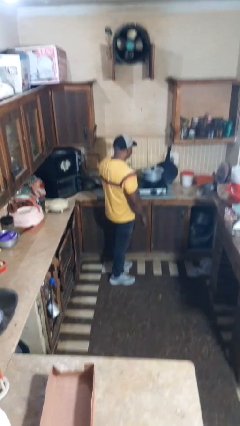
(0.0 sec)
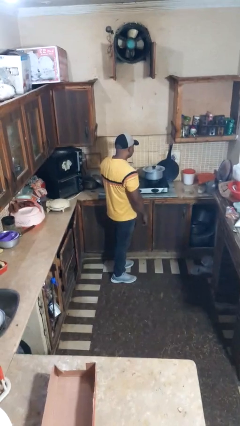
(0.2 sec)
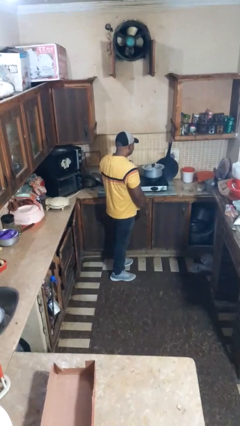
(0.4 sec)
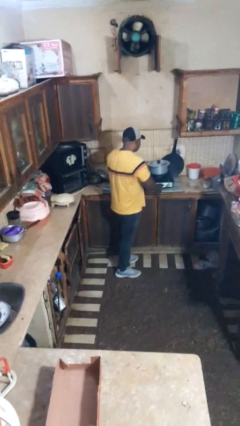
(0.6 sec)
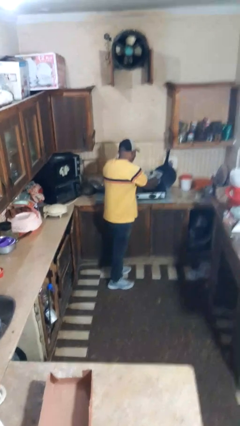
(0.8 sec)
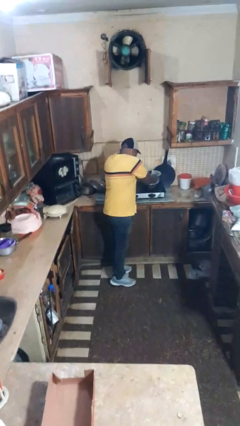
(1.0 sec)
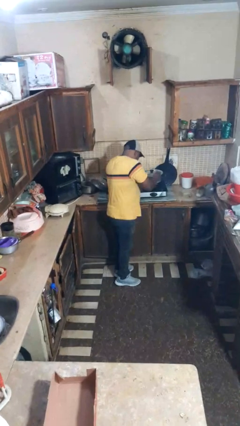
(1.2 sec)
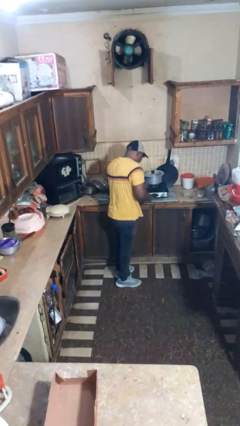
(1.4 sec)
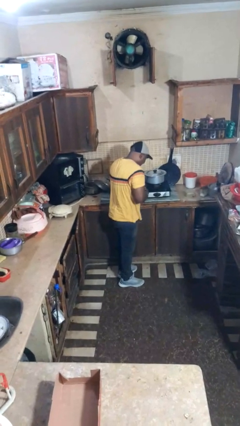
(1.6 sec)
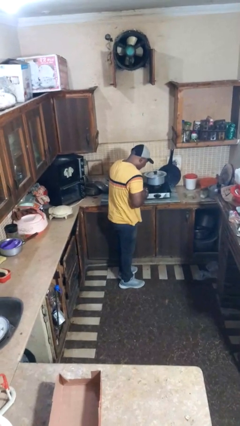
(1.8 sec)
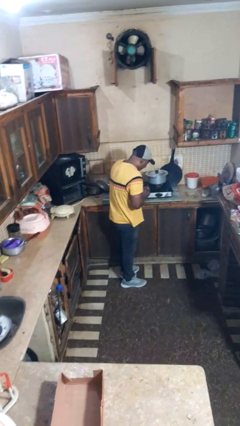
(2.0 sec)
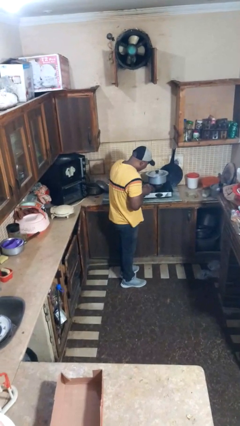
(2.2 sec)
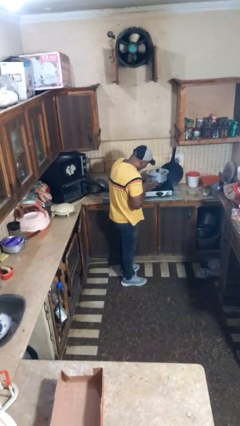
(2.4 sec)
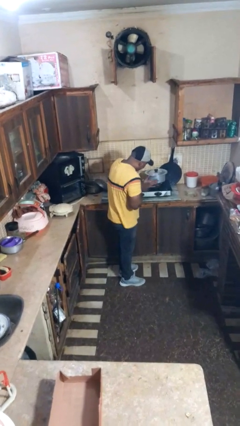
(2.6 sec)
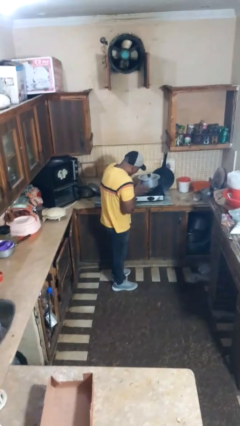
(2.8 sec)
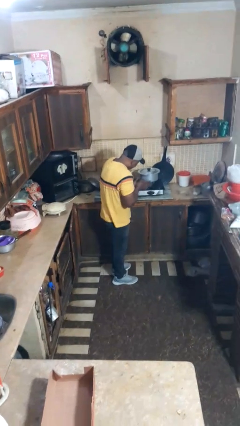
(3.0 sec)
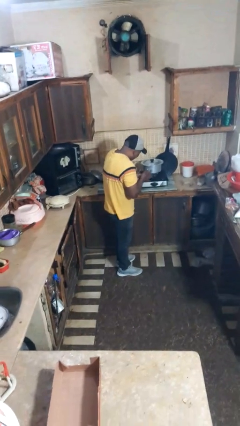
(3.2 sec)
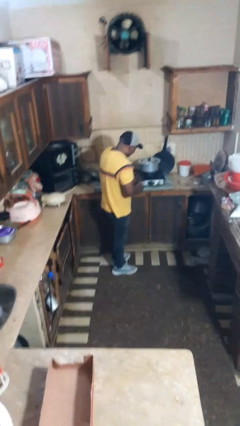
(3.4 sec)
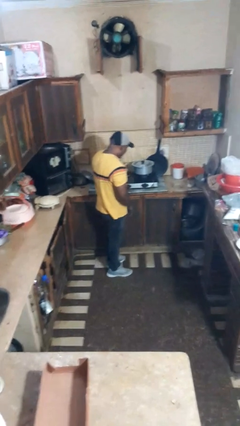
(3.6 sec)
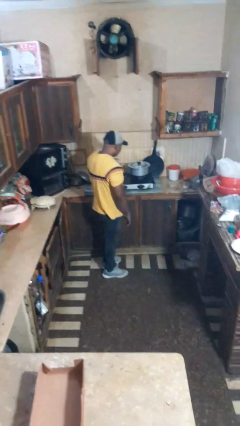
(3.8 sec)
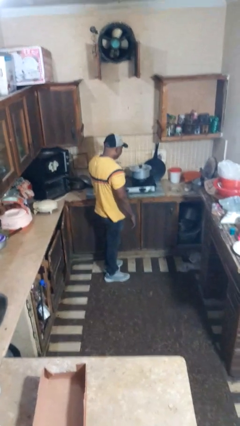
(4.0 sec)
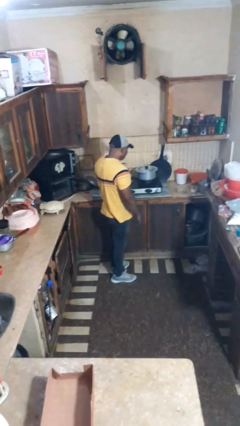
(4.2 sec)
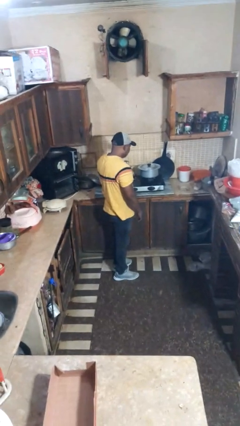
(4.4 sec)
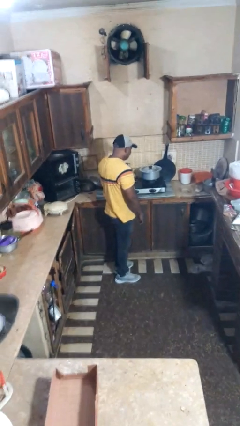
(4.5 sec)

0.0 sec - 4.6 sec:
person burns hand

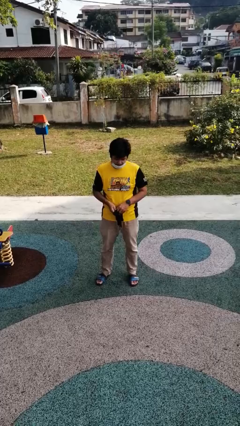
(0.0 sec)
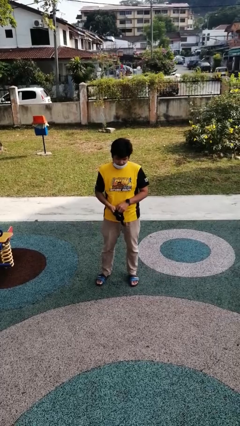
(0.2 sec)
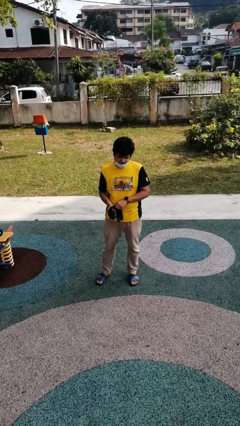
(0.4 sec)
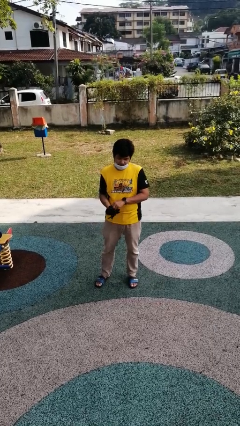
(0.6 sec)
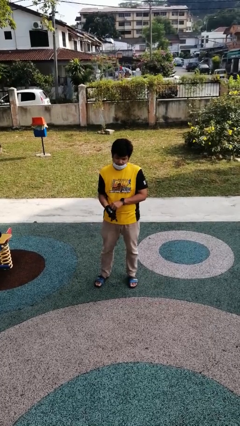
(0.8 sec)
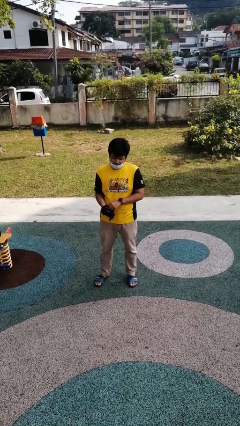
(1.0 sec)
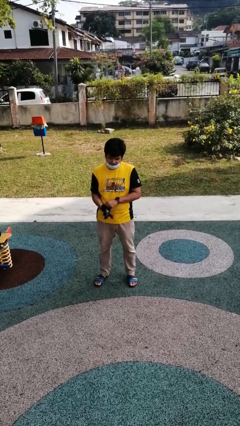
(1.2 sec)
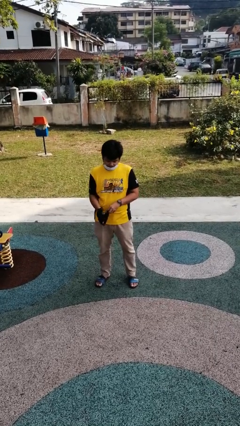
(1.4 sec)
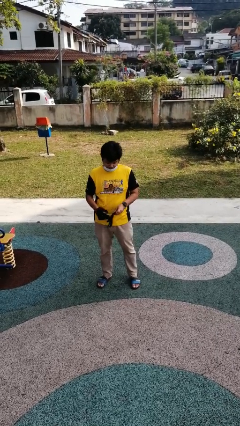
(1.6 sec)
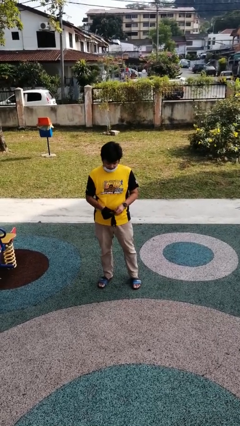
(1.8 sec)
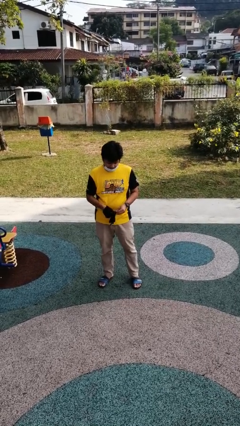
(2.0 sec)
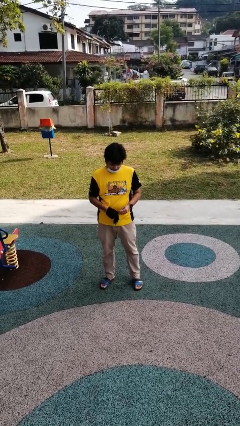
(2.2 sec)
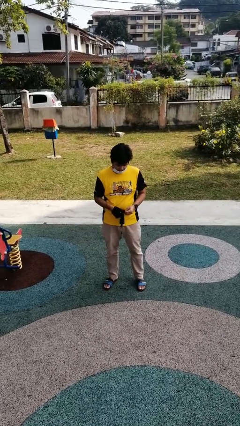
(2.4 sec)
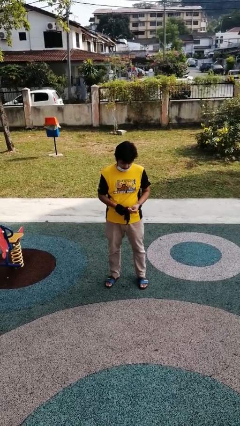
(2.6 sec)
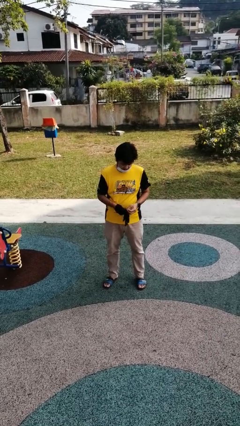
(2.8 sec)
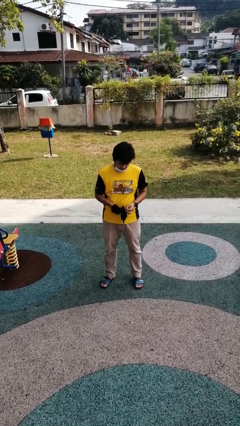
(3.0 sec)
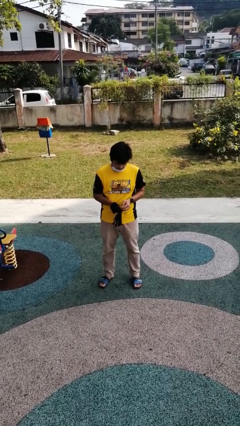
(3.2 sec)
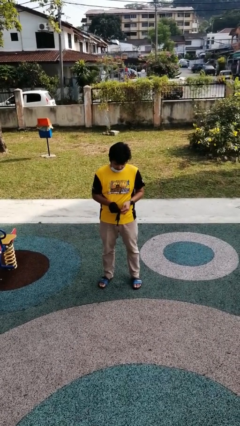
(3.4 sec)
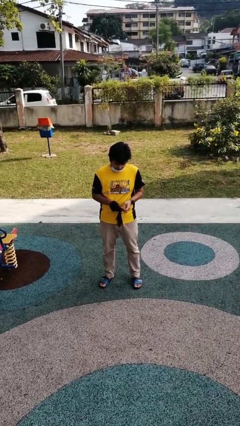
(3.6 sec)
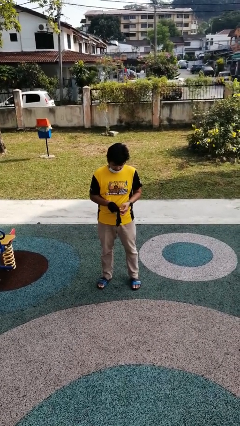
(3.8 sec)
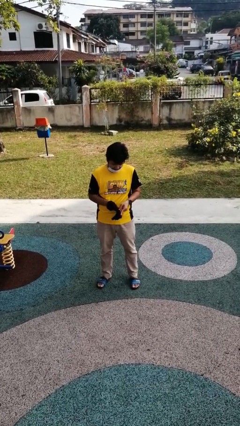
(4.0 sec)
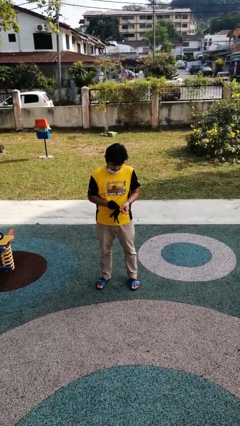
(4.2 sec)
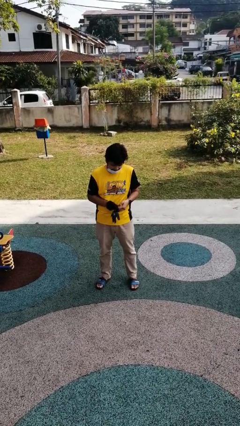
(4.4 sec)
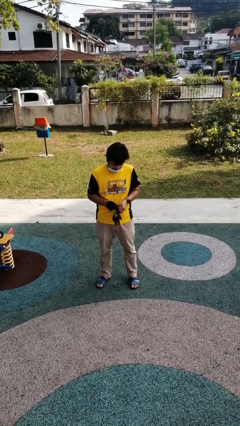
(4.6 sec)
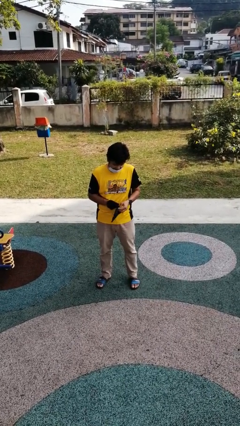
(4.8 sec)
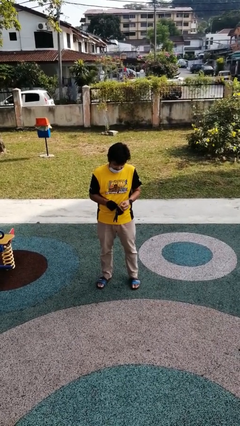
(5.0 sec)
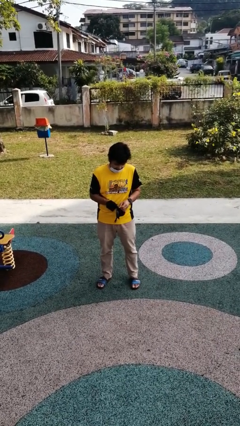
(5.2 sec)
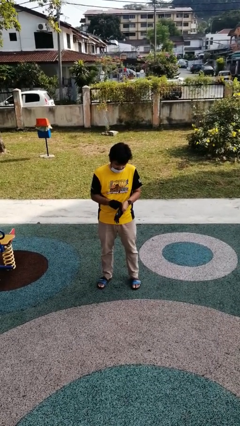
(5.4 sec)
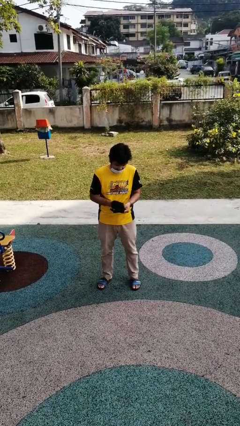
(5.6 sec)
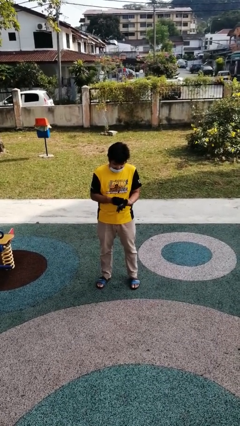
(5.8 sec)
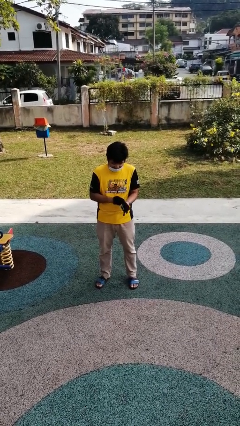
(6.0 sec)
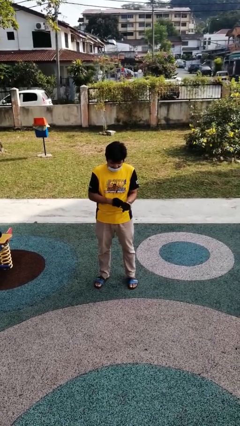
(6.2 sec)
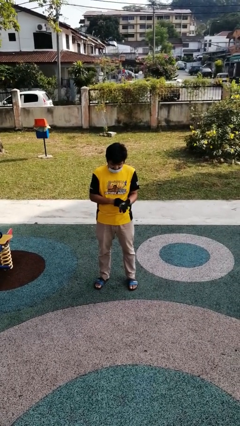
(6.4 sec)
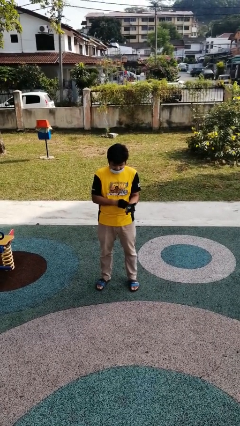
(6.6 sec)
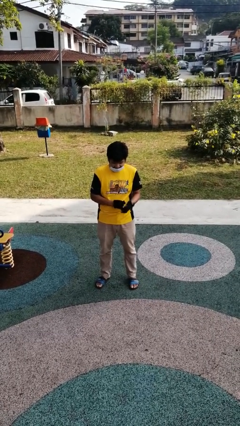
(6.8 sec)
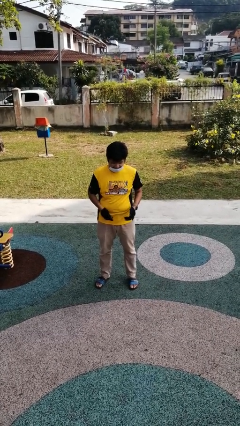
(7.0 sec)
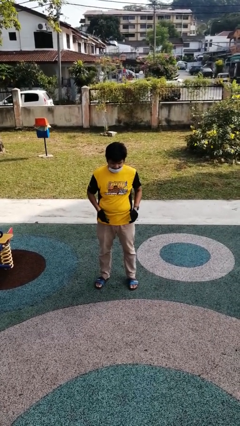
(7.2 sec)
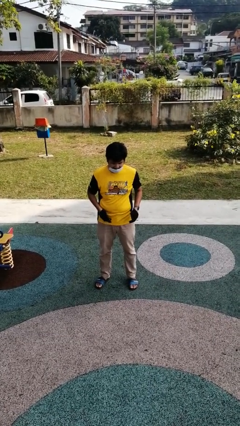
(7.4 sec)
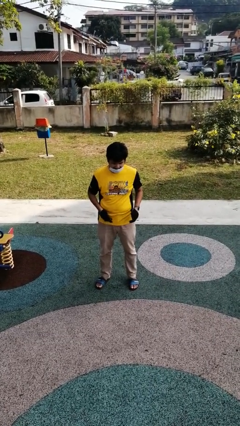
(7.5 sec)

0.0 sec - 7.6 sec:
person puts on gloves

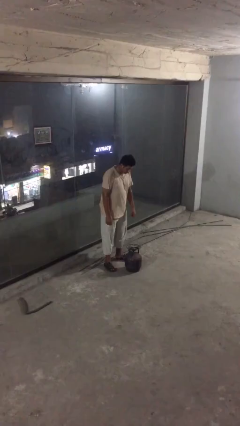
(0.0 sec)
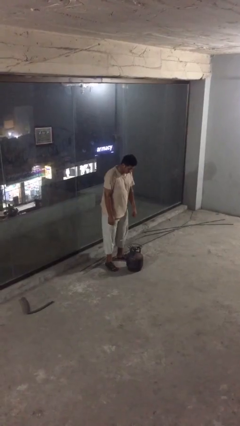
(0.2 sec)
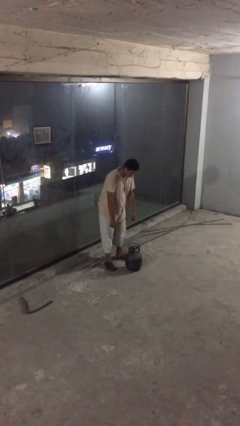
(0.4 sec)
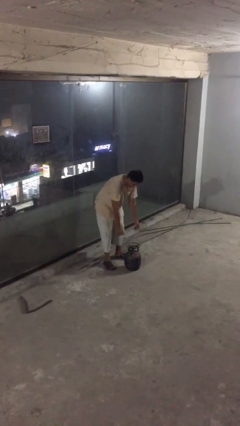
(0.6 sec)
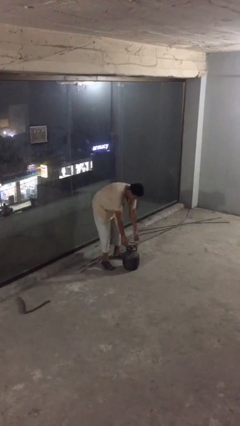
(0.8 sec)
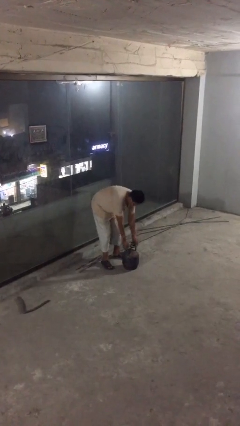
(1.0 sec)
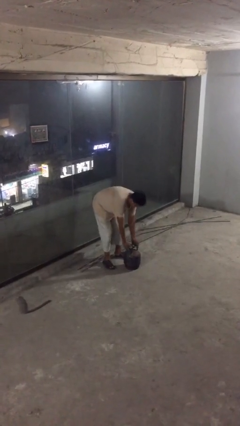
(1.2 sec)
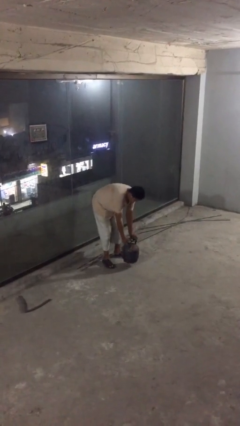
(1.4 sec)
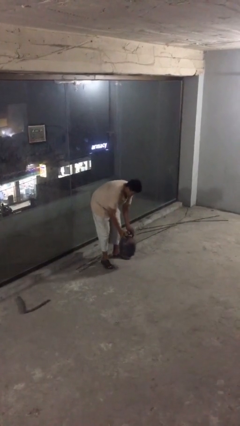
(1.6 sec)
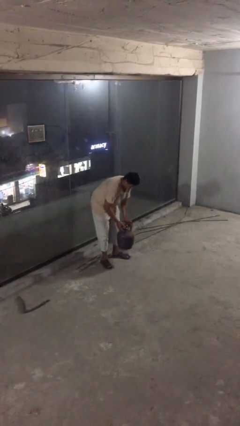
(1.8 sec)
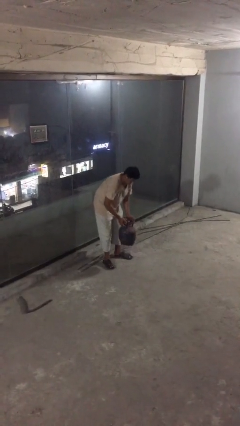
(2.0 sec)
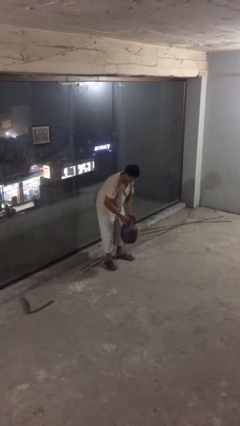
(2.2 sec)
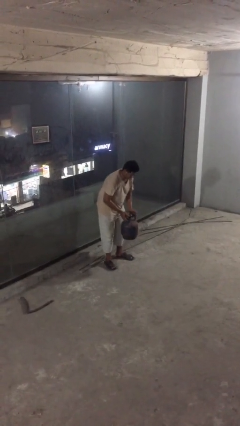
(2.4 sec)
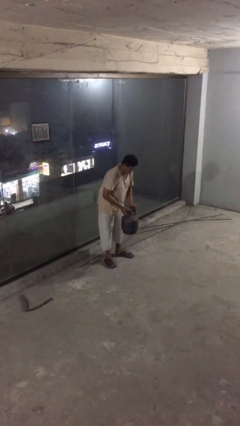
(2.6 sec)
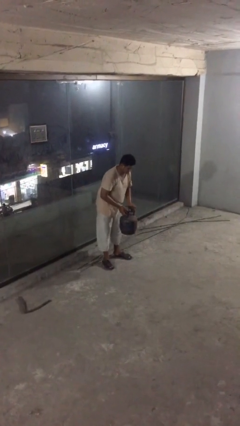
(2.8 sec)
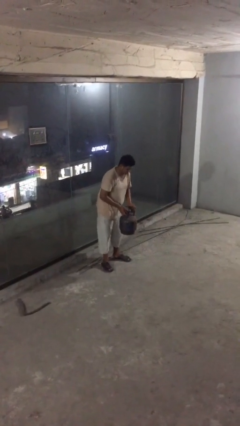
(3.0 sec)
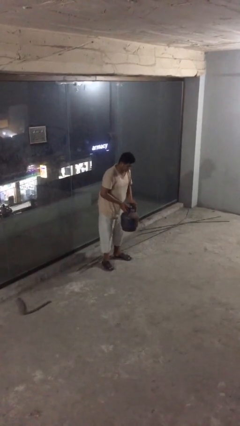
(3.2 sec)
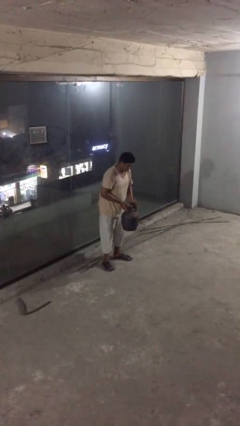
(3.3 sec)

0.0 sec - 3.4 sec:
person picks up object from floor

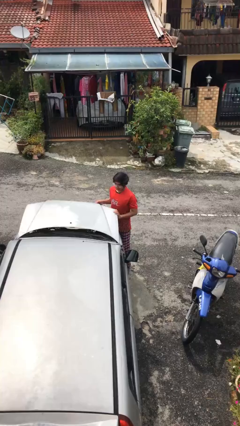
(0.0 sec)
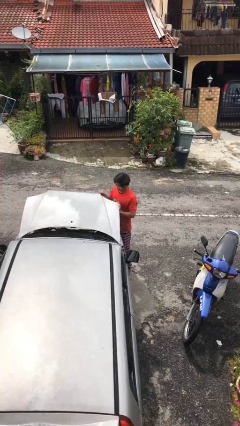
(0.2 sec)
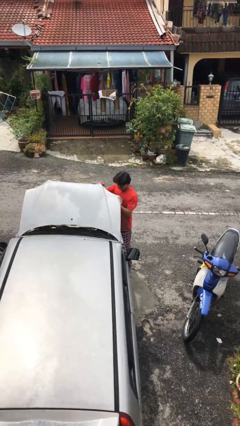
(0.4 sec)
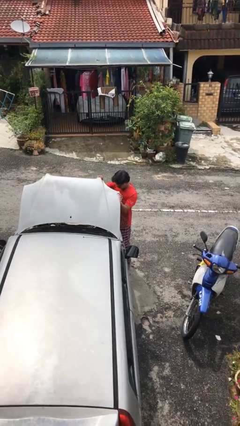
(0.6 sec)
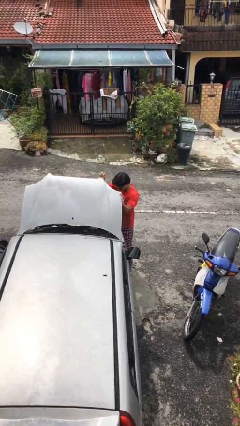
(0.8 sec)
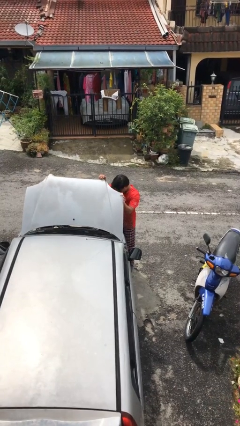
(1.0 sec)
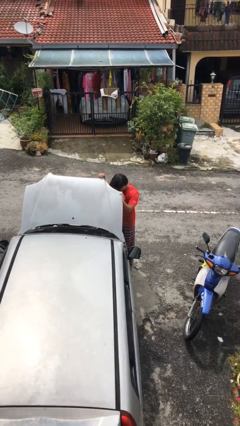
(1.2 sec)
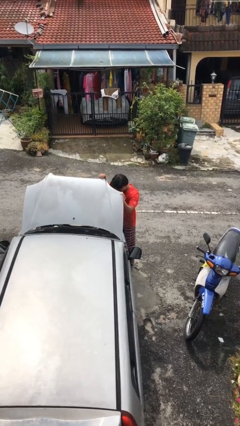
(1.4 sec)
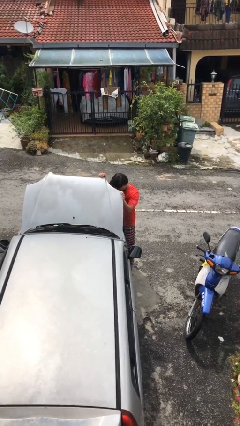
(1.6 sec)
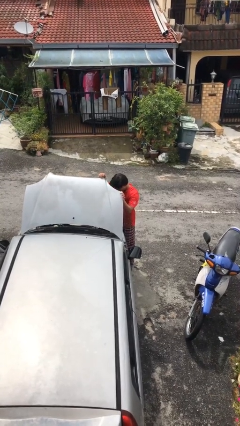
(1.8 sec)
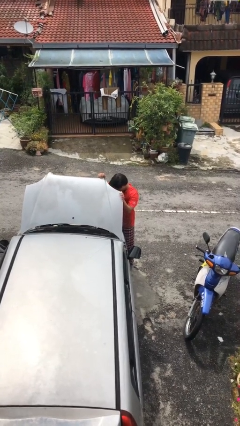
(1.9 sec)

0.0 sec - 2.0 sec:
person opens car hood

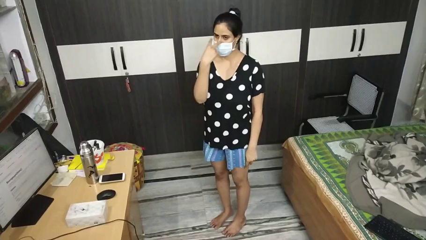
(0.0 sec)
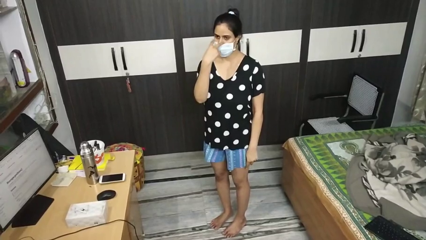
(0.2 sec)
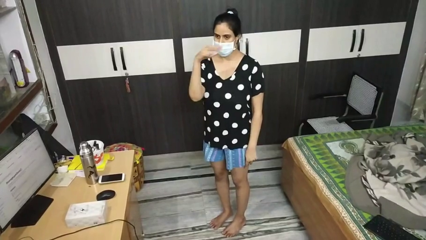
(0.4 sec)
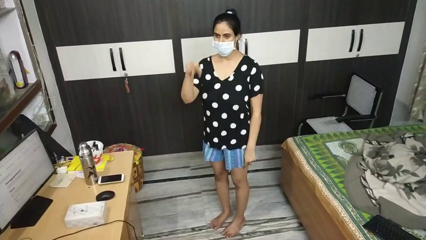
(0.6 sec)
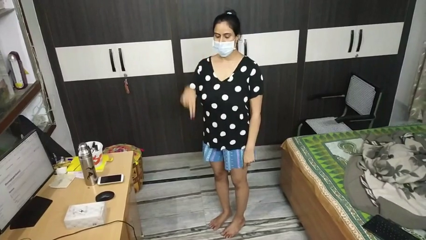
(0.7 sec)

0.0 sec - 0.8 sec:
person gestures watch closely
